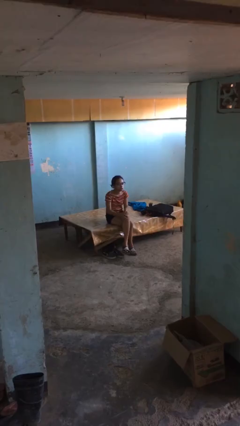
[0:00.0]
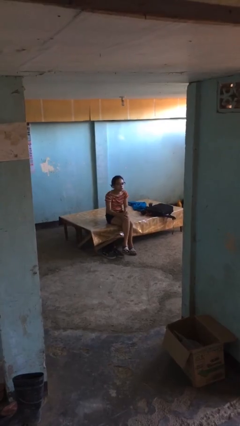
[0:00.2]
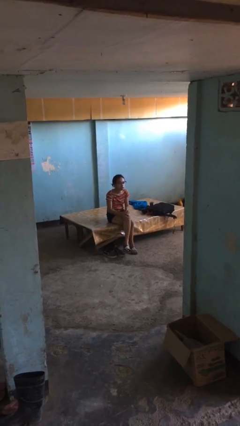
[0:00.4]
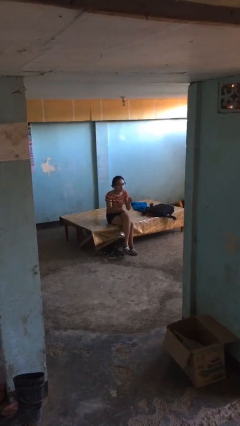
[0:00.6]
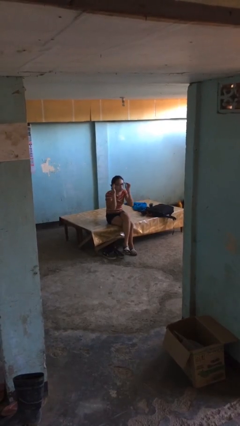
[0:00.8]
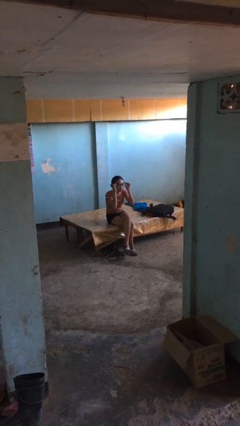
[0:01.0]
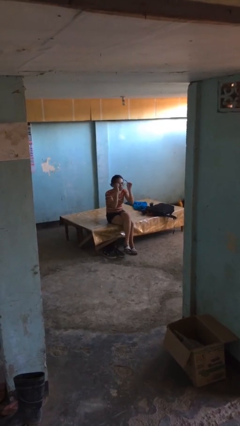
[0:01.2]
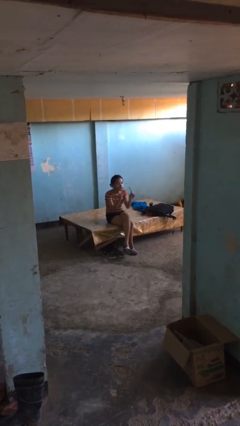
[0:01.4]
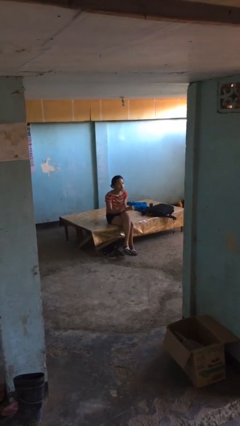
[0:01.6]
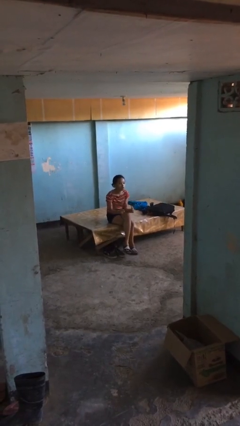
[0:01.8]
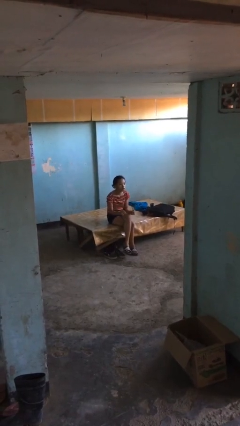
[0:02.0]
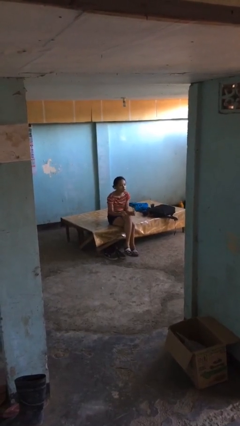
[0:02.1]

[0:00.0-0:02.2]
person takes off glasses

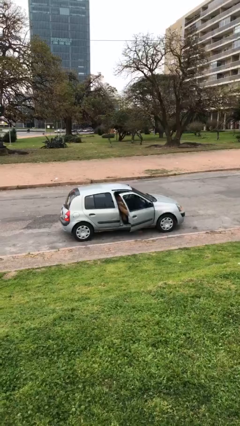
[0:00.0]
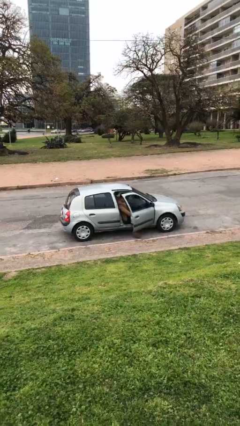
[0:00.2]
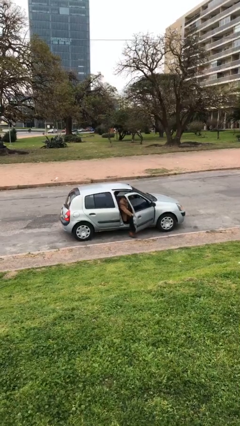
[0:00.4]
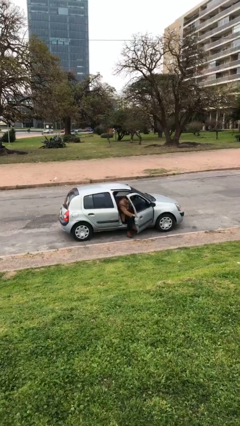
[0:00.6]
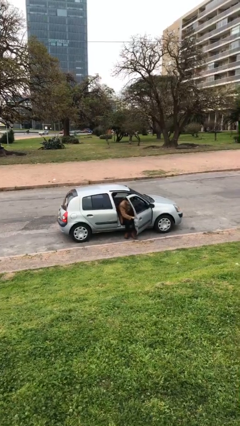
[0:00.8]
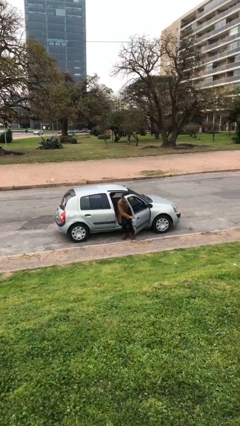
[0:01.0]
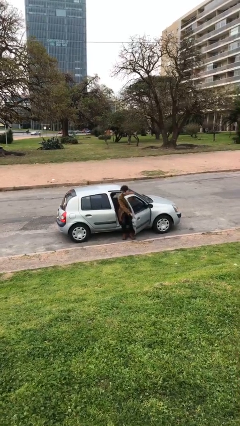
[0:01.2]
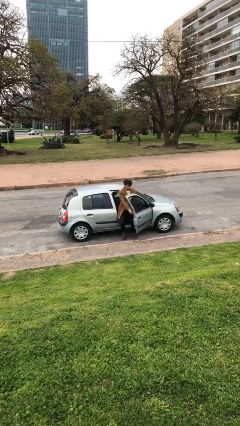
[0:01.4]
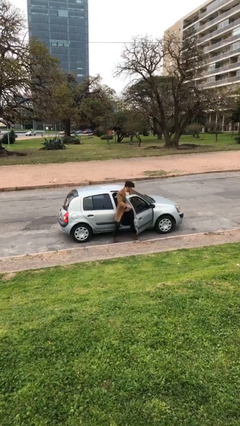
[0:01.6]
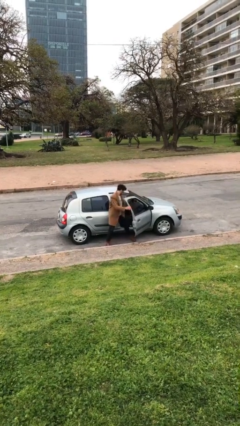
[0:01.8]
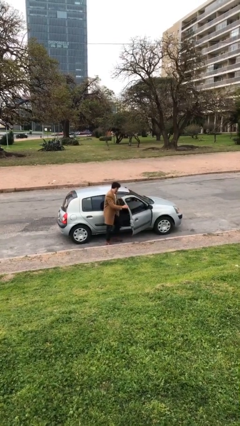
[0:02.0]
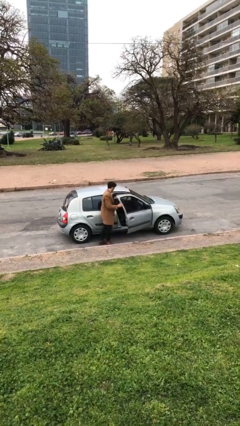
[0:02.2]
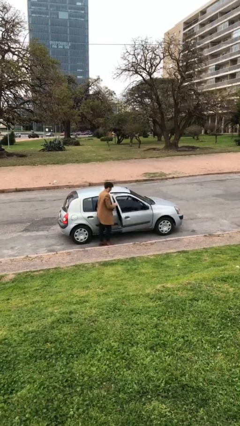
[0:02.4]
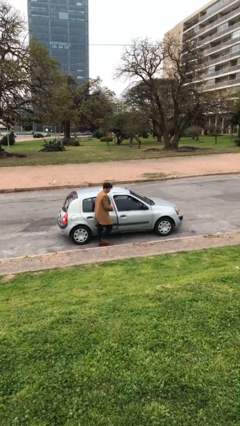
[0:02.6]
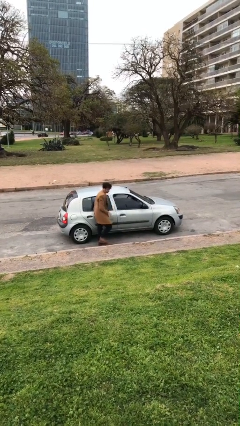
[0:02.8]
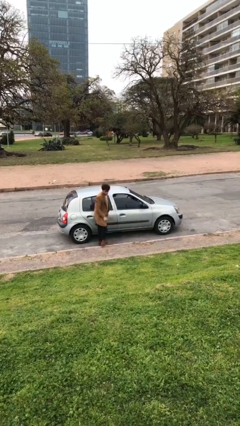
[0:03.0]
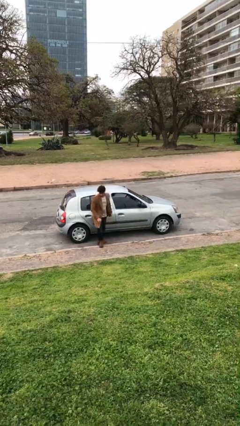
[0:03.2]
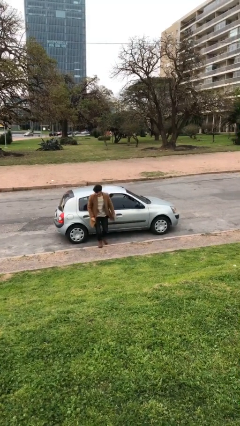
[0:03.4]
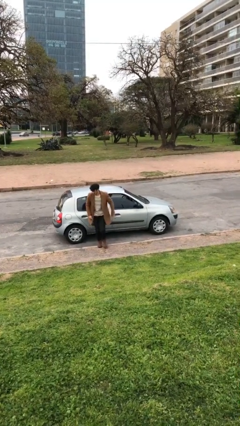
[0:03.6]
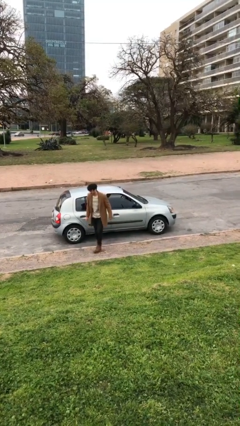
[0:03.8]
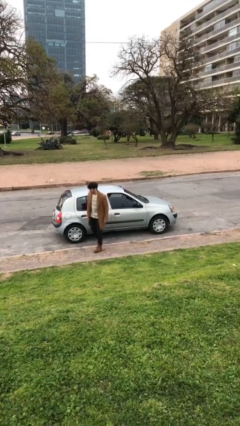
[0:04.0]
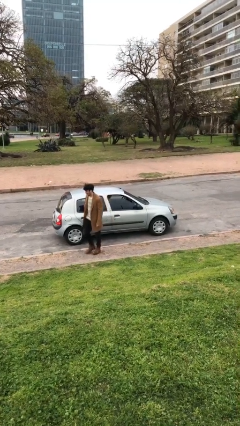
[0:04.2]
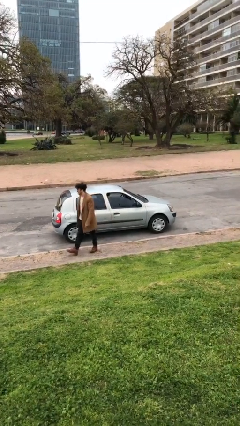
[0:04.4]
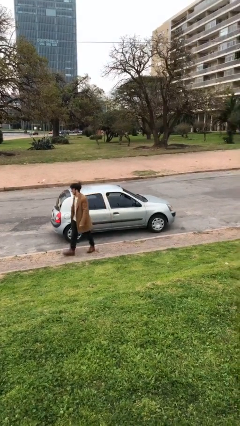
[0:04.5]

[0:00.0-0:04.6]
car drops off person

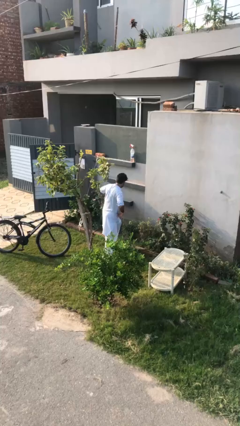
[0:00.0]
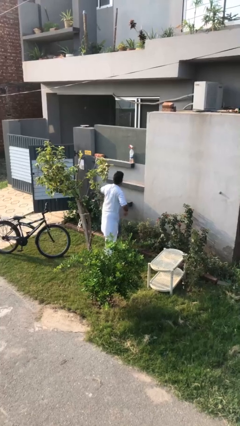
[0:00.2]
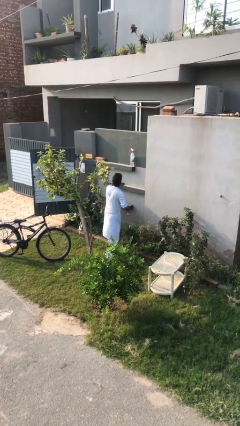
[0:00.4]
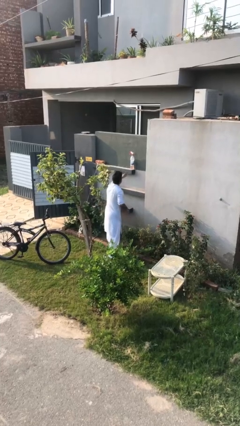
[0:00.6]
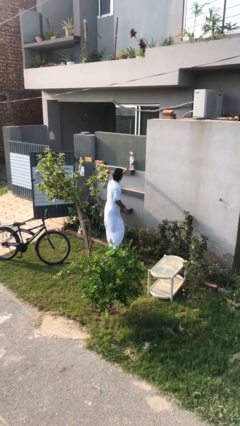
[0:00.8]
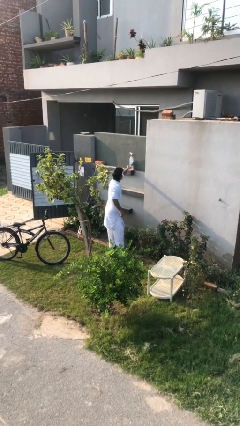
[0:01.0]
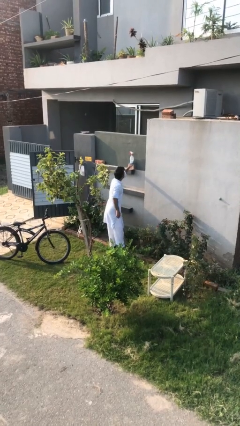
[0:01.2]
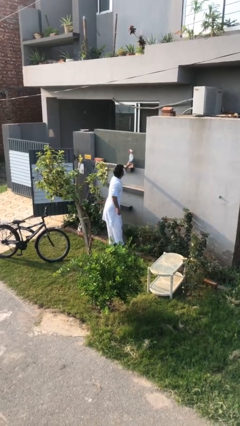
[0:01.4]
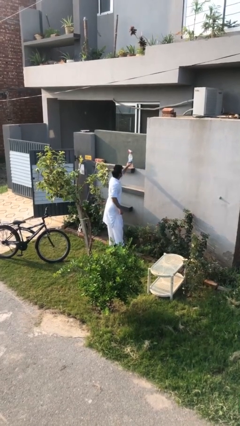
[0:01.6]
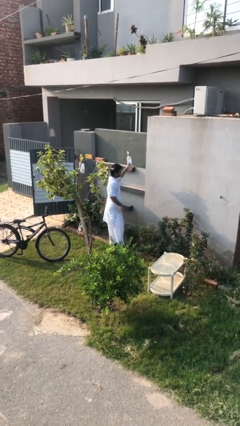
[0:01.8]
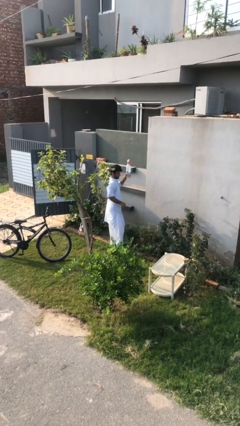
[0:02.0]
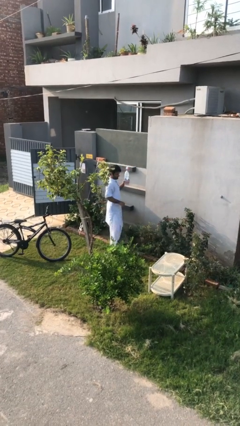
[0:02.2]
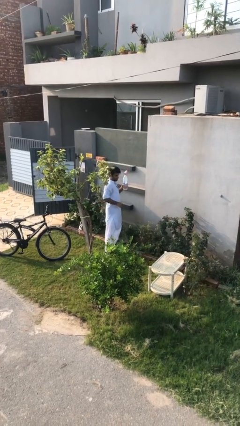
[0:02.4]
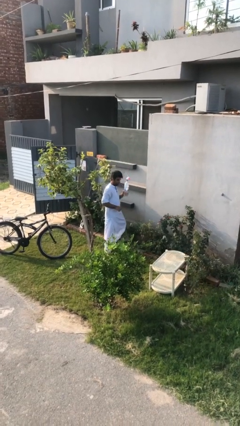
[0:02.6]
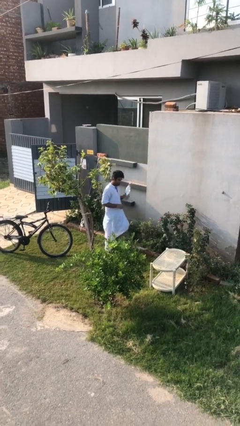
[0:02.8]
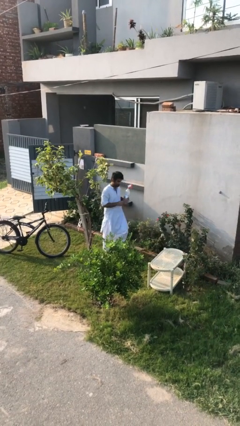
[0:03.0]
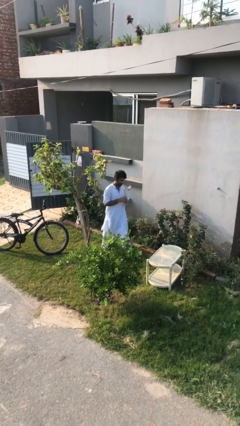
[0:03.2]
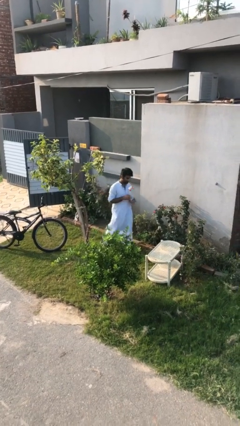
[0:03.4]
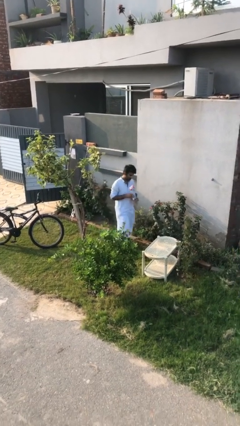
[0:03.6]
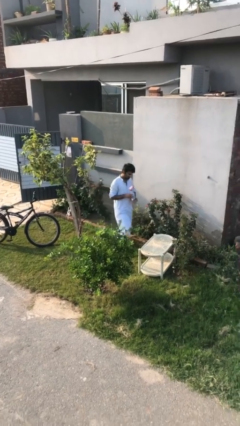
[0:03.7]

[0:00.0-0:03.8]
person picks up object from shelf

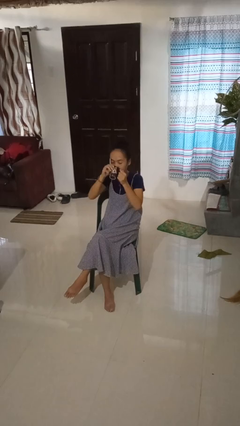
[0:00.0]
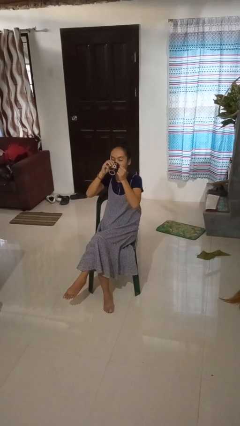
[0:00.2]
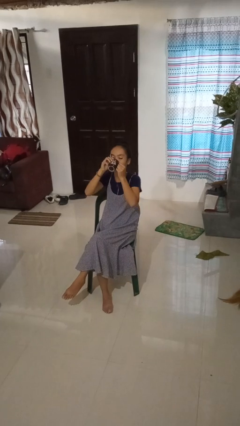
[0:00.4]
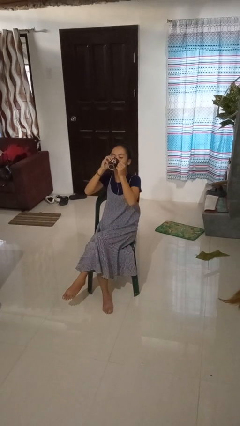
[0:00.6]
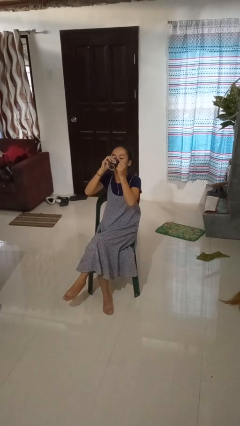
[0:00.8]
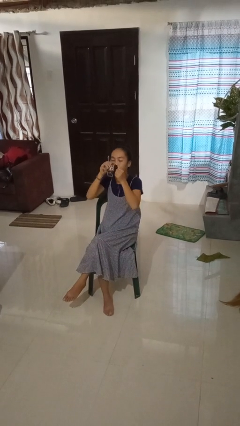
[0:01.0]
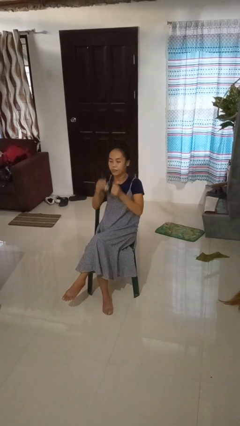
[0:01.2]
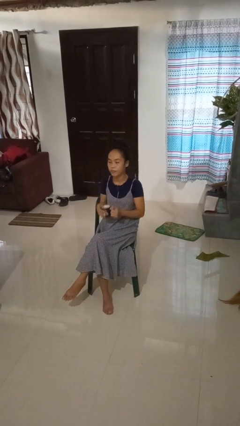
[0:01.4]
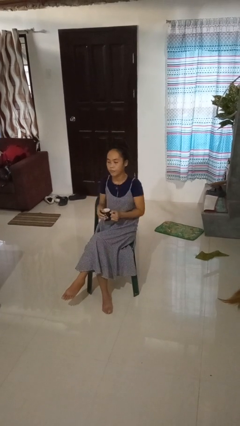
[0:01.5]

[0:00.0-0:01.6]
person drinks from mug

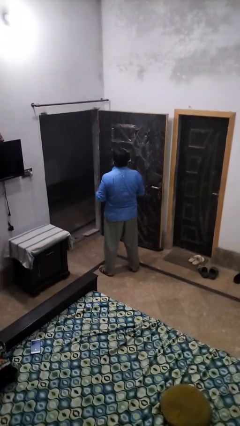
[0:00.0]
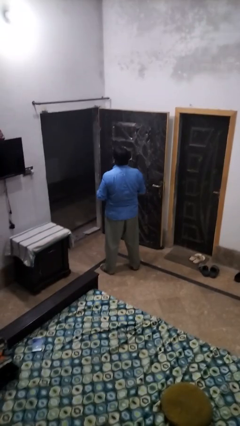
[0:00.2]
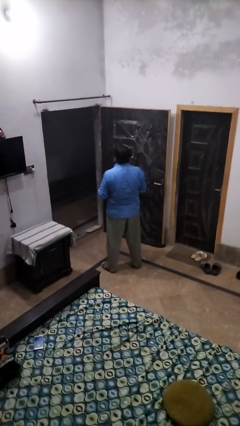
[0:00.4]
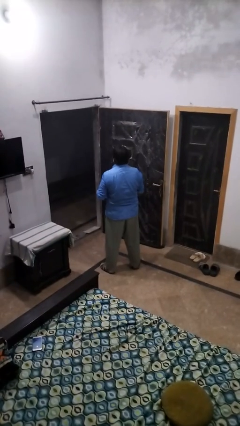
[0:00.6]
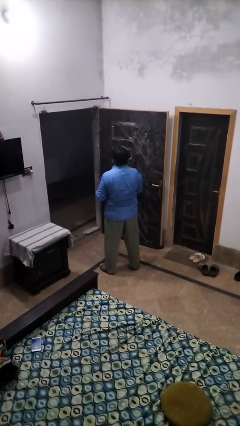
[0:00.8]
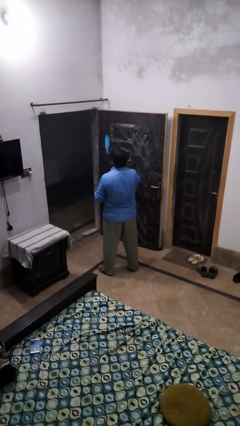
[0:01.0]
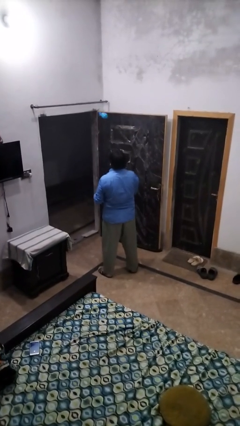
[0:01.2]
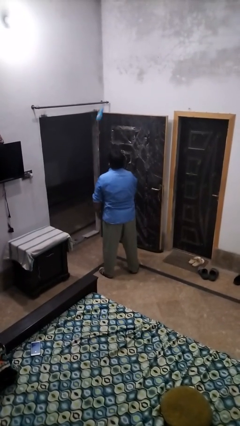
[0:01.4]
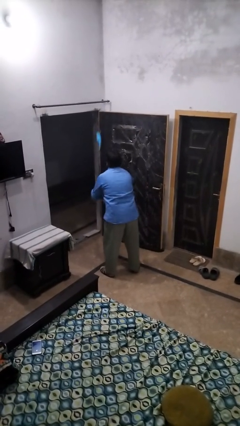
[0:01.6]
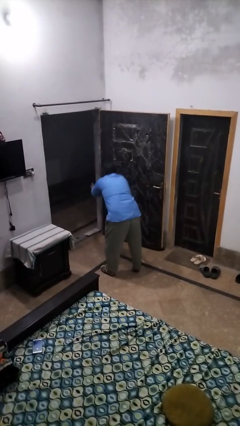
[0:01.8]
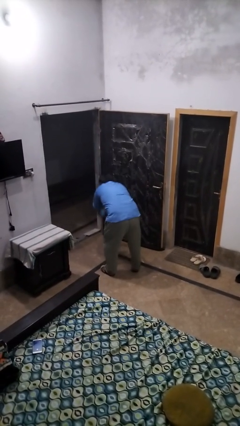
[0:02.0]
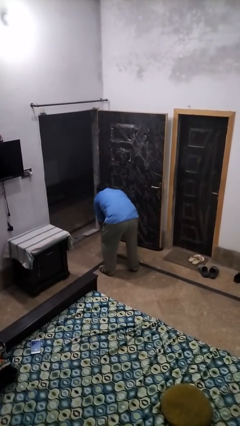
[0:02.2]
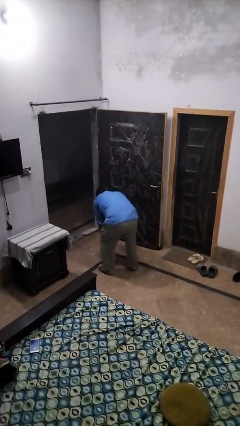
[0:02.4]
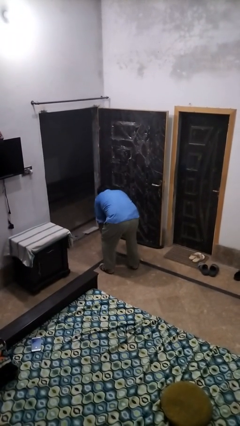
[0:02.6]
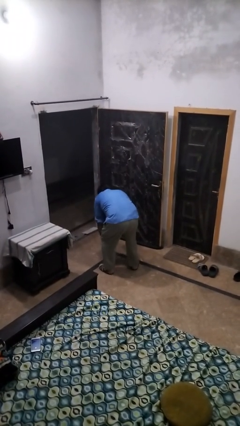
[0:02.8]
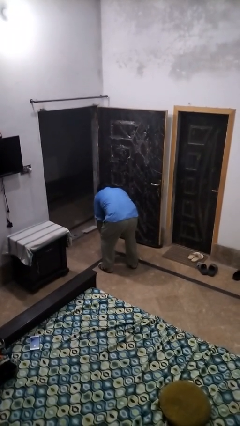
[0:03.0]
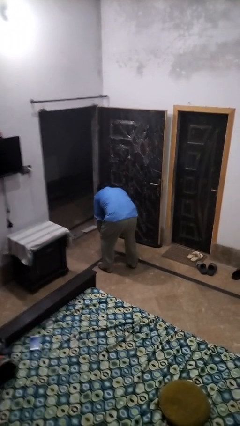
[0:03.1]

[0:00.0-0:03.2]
person drops object

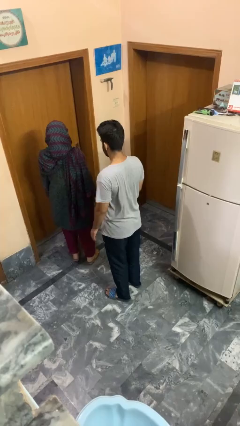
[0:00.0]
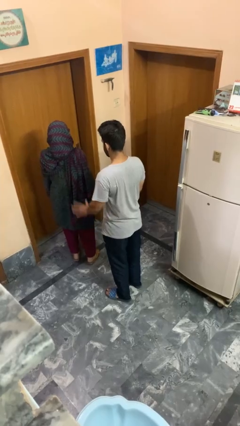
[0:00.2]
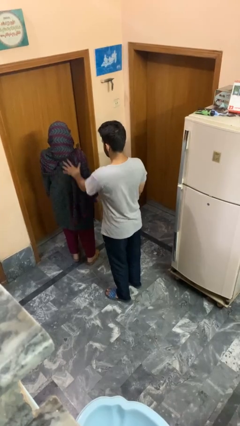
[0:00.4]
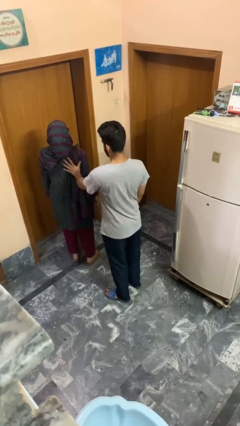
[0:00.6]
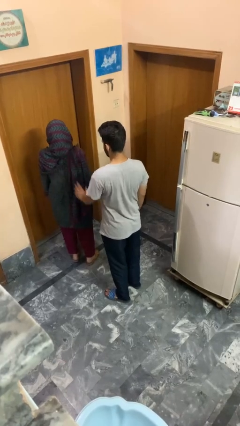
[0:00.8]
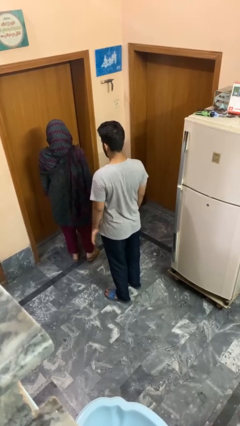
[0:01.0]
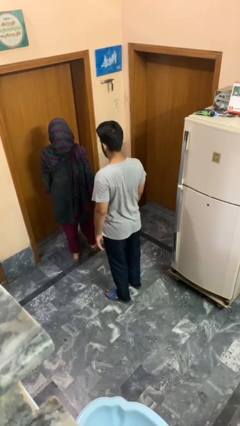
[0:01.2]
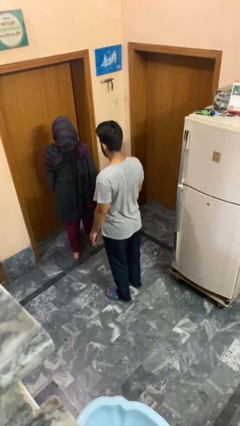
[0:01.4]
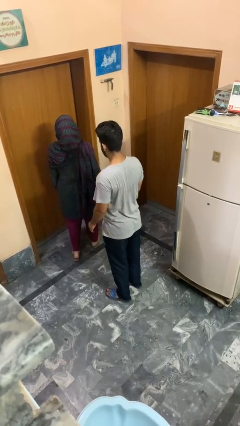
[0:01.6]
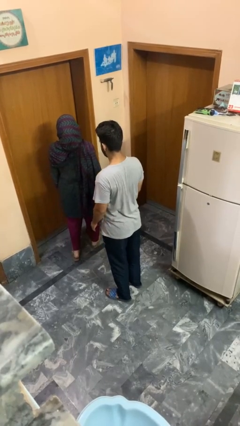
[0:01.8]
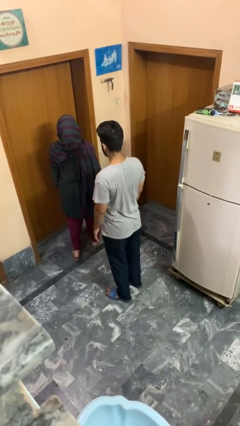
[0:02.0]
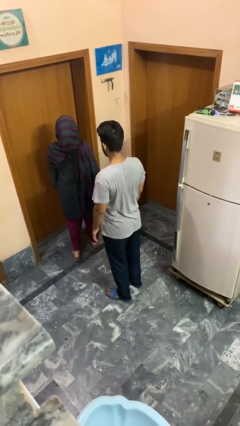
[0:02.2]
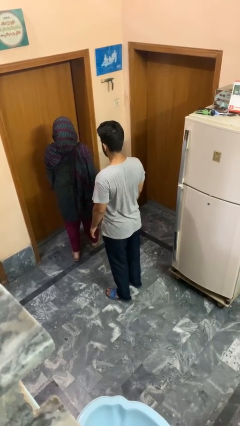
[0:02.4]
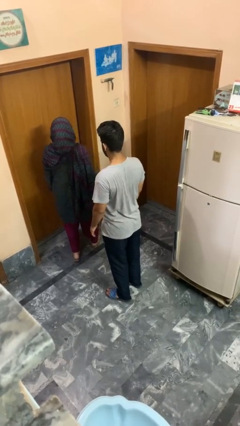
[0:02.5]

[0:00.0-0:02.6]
person shoves person
